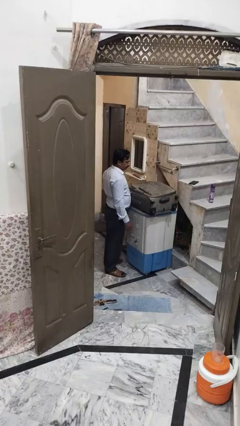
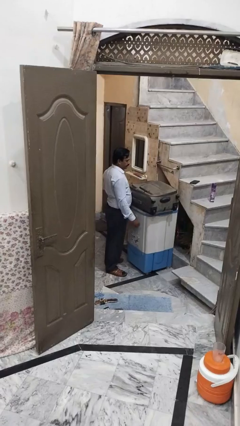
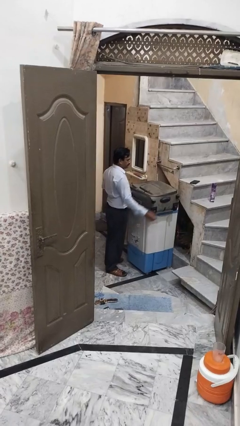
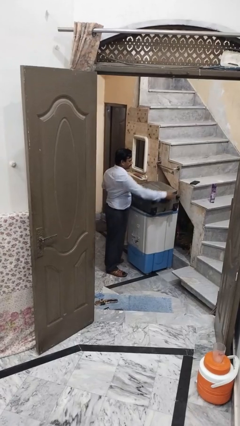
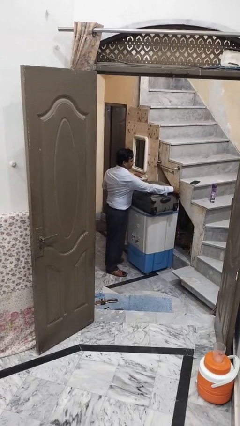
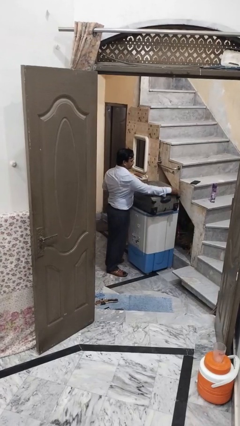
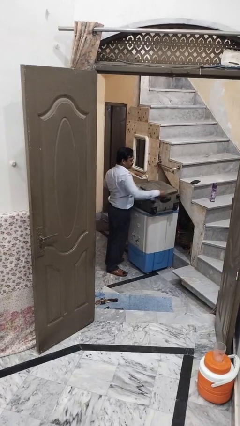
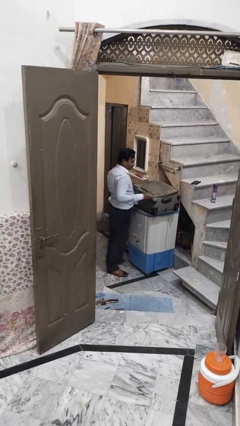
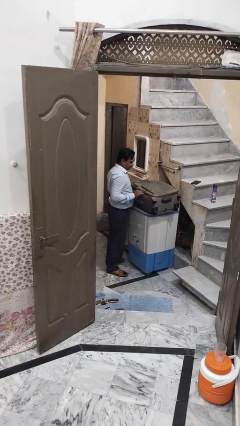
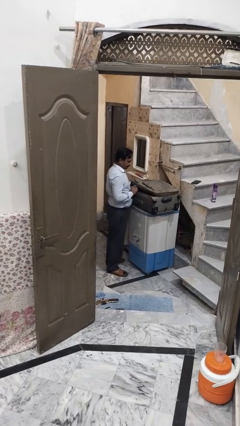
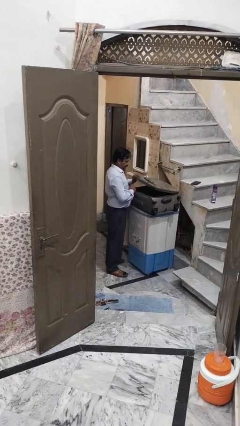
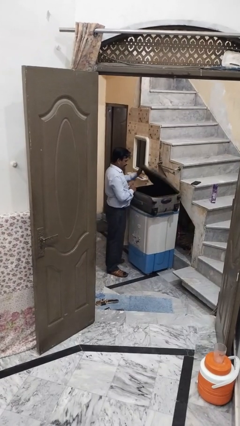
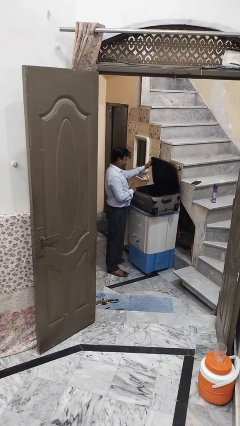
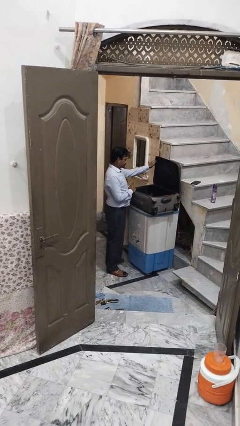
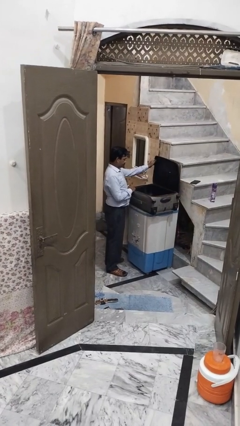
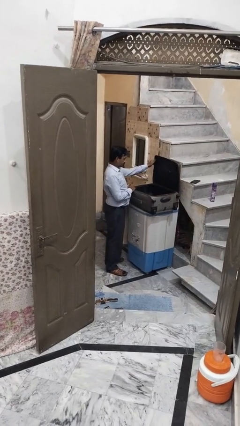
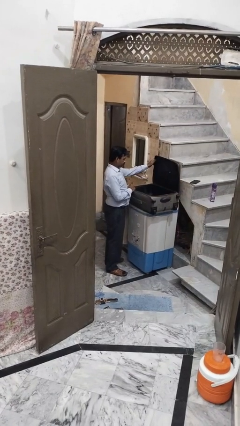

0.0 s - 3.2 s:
person opens suitcase

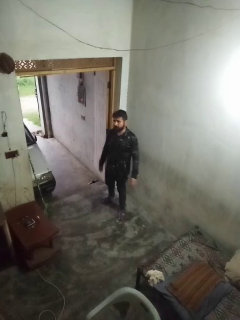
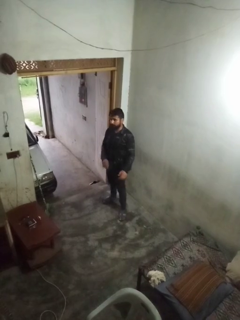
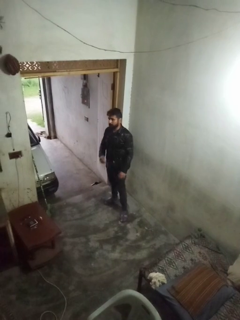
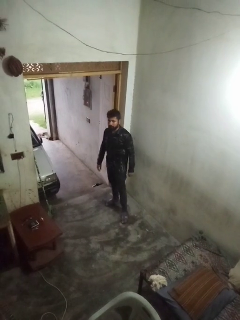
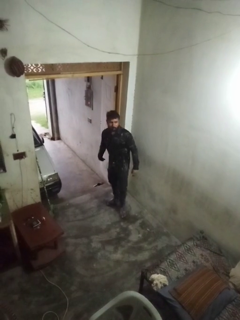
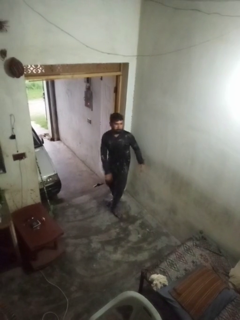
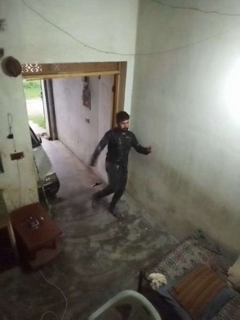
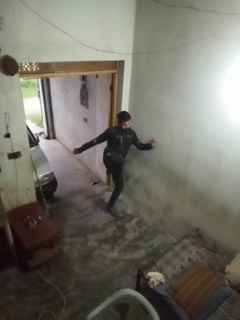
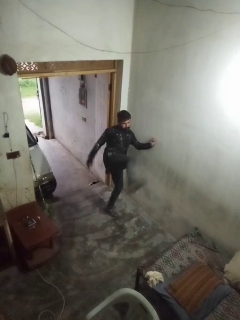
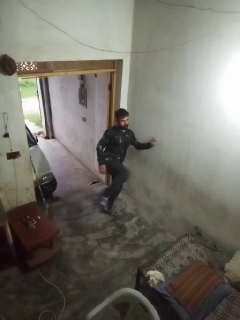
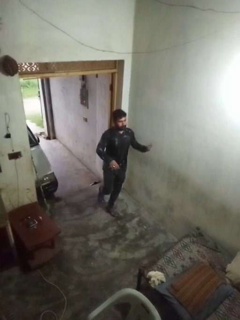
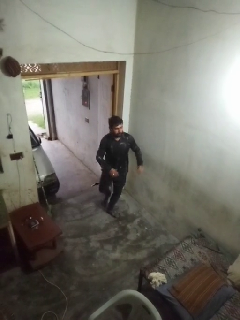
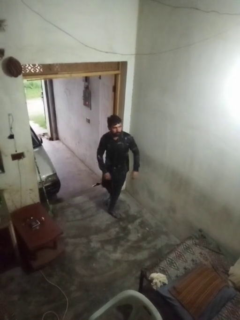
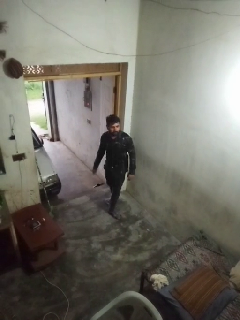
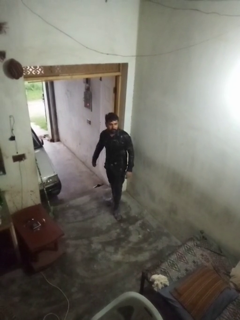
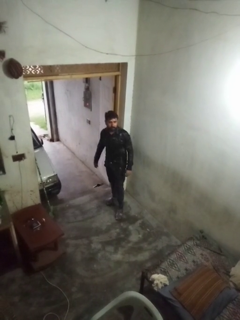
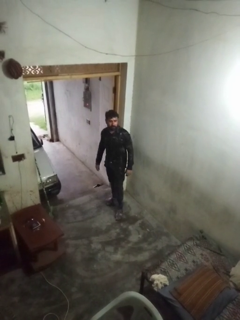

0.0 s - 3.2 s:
person karate kicks

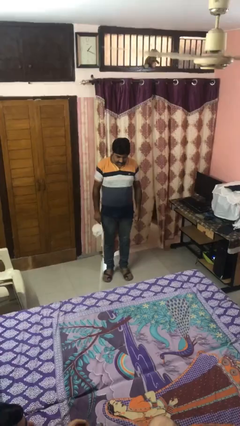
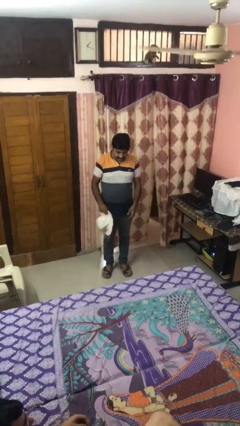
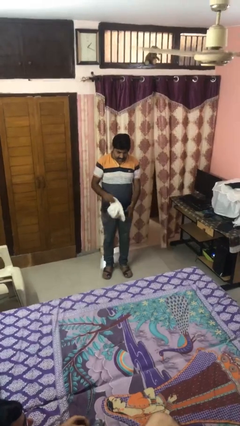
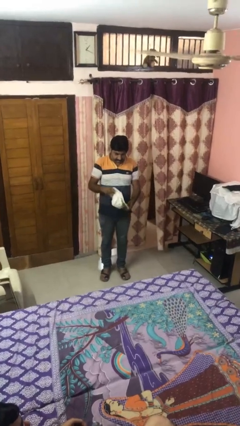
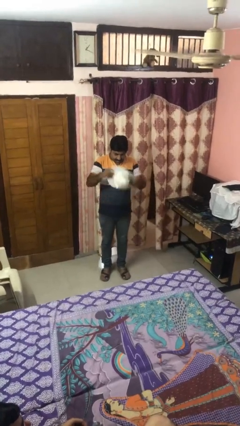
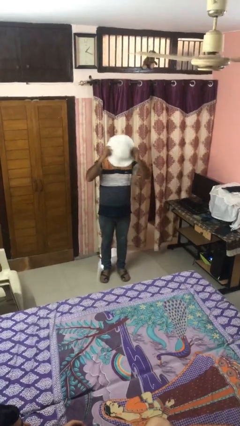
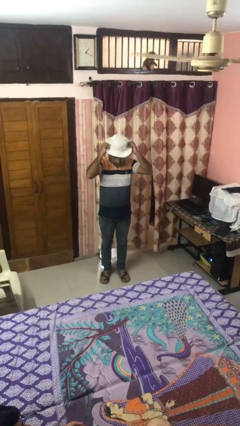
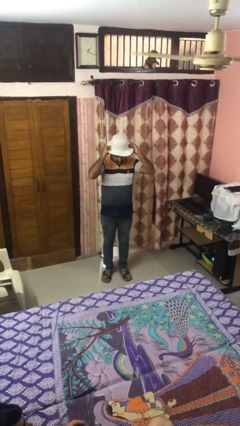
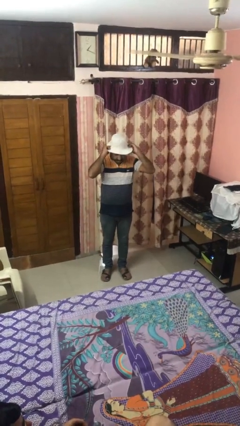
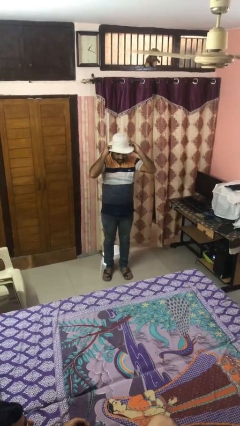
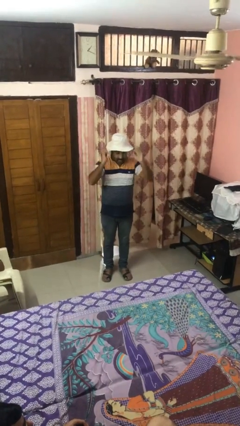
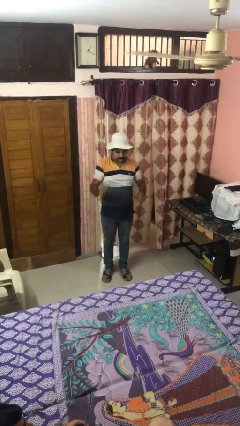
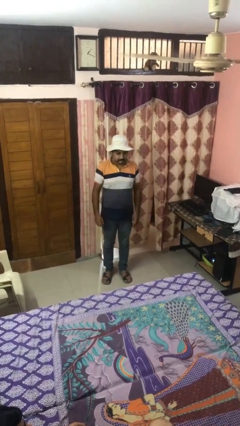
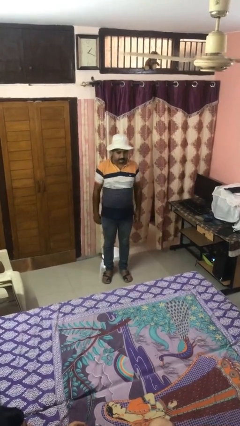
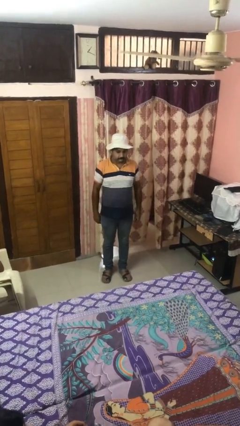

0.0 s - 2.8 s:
person puts on hat

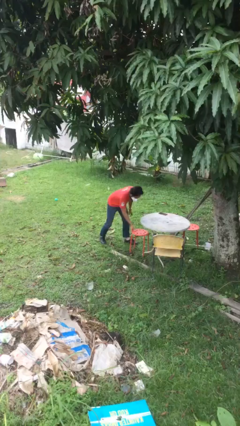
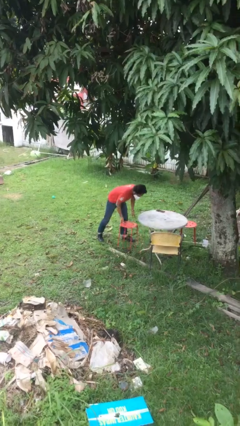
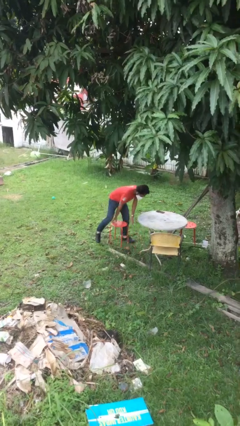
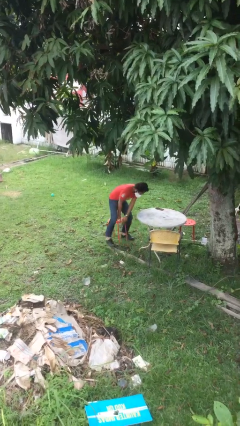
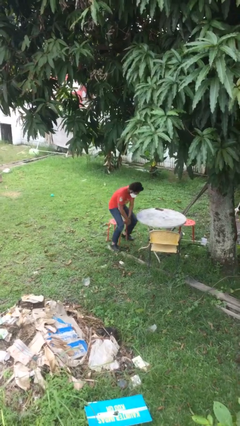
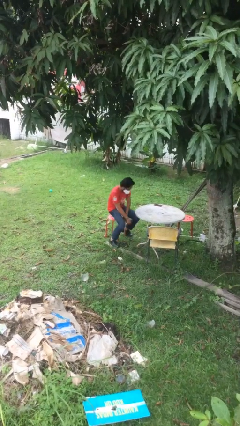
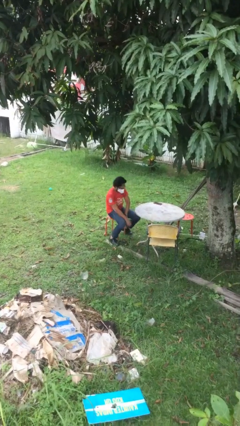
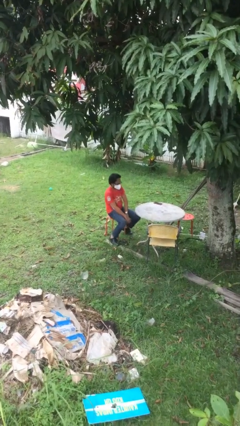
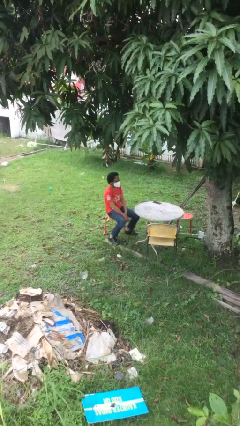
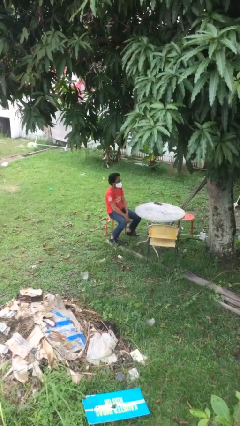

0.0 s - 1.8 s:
person sits down

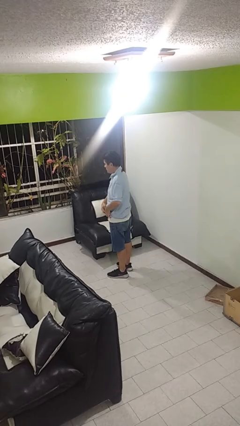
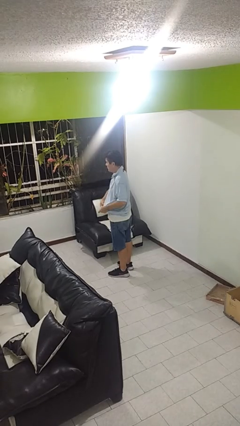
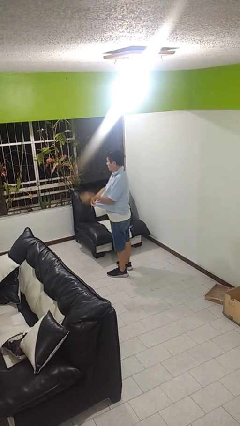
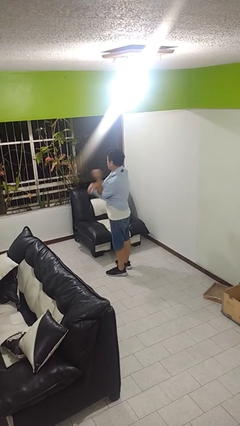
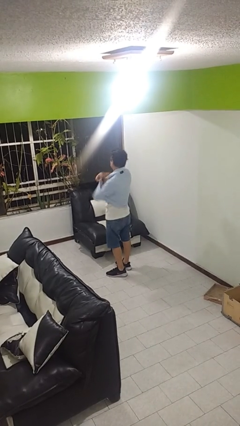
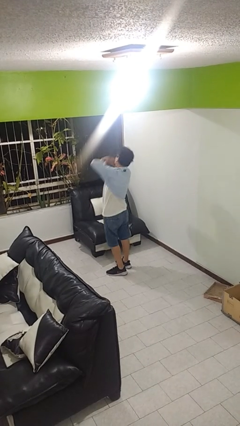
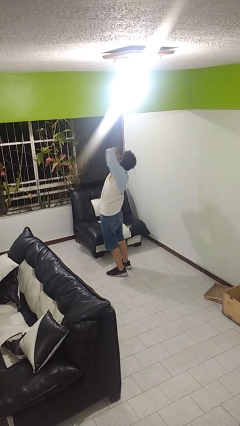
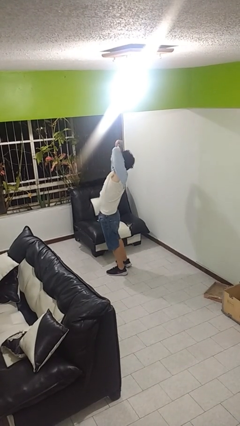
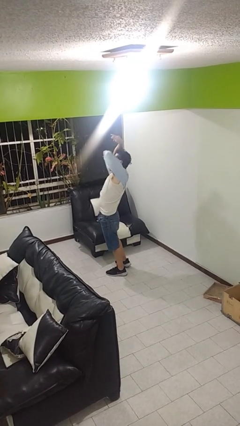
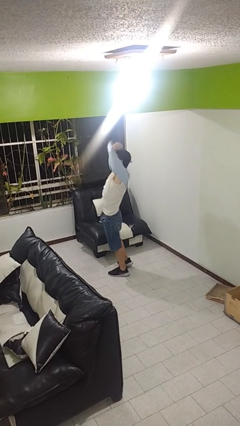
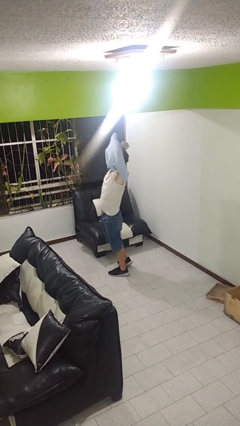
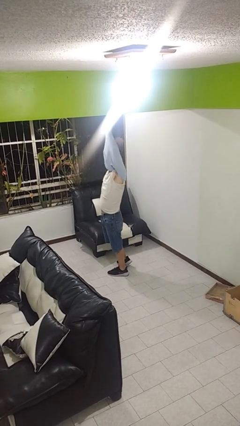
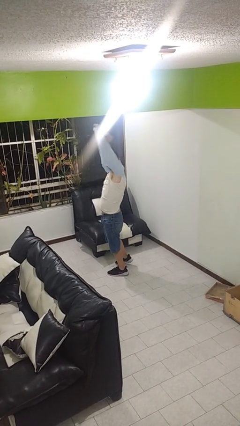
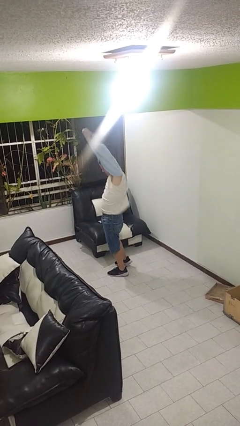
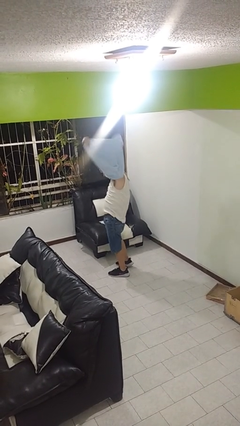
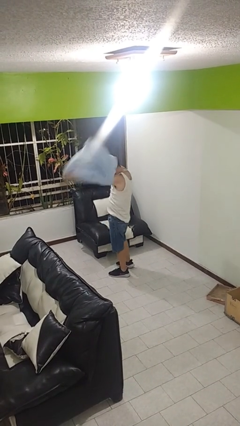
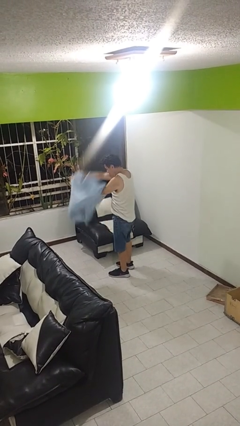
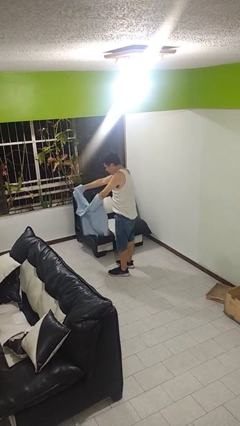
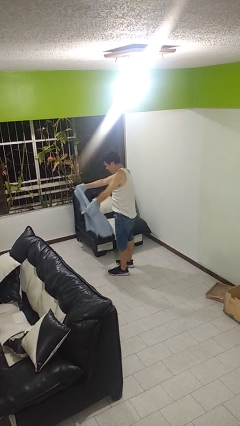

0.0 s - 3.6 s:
person takes off shirt

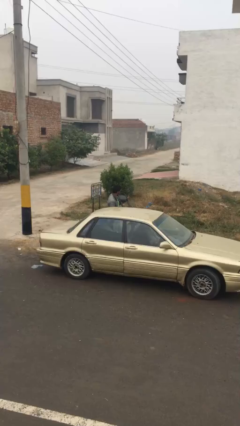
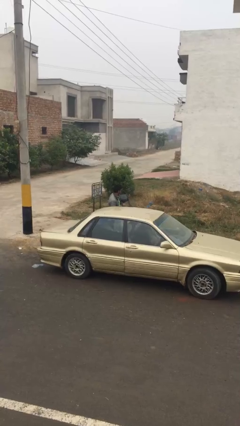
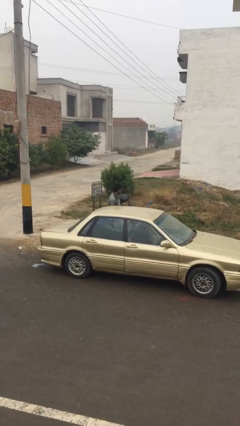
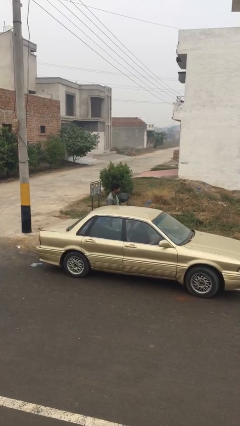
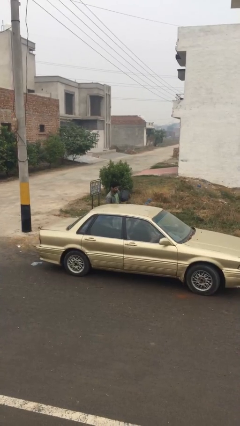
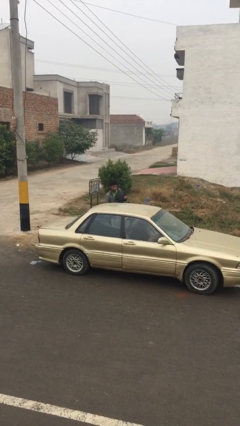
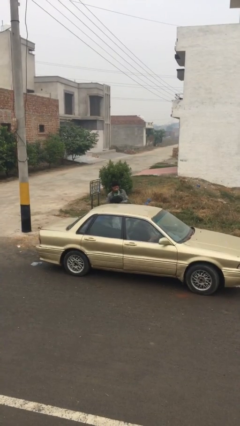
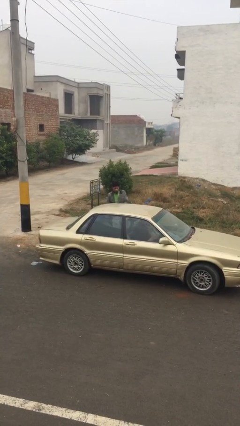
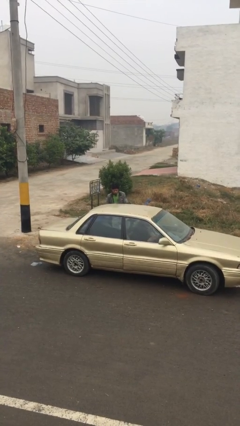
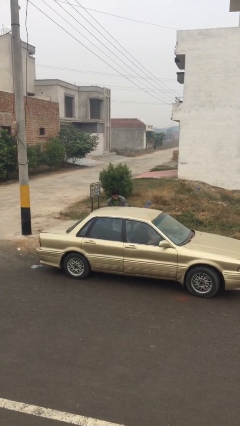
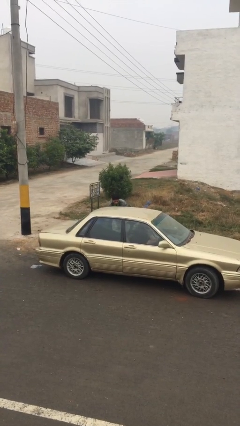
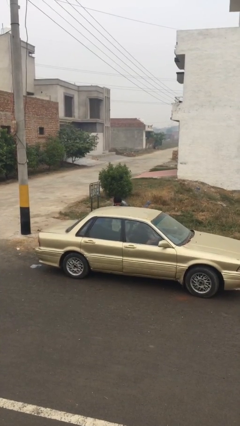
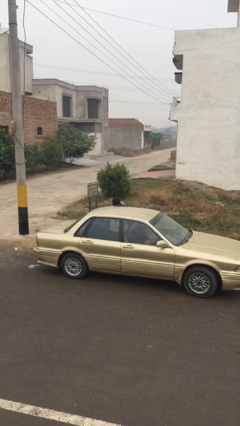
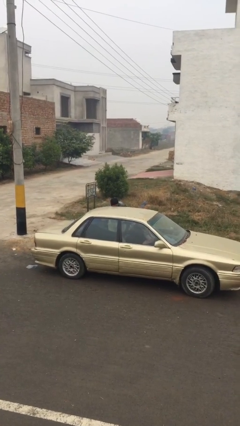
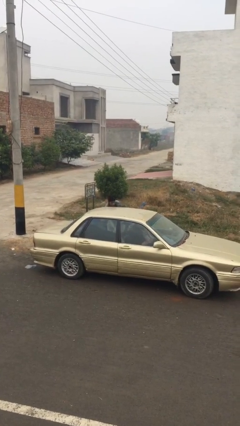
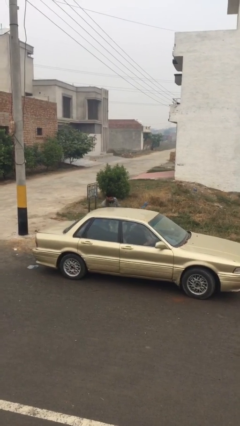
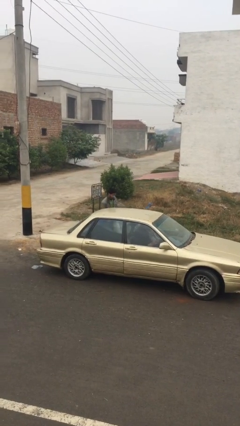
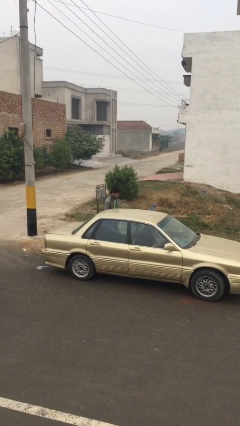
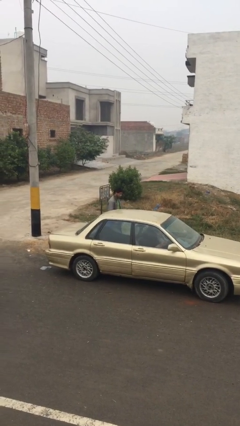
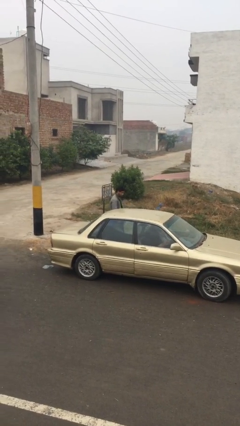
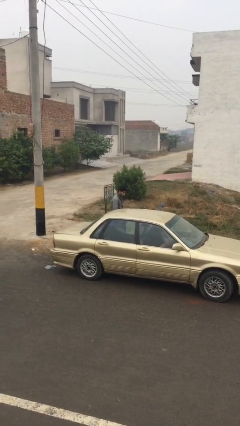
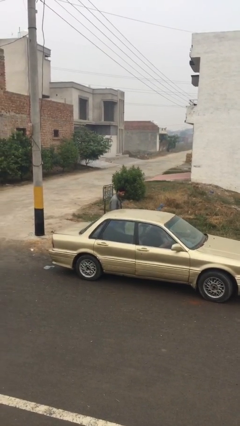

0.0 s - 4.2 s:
person loads car
